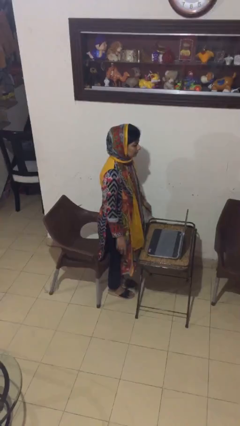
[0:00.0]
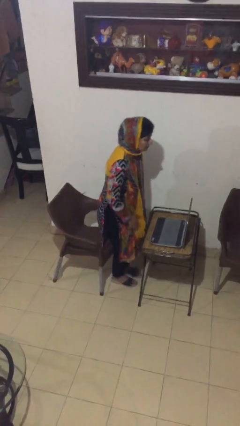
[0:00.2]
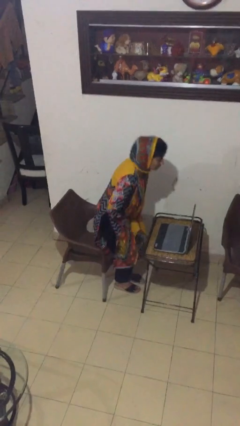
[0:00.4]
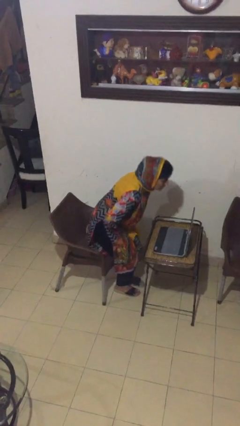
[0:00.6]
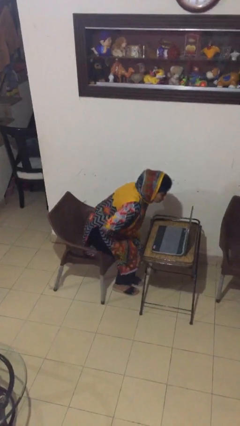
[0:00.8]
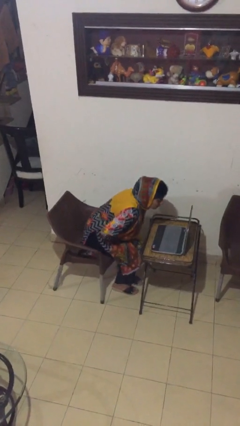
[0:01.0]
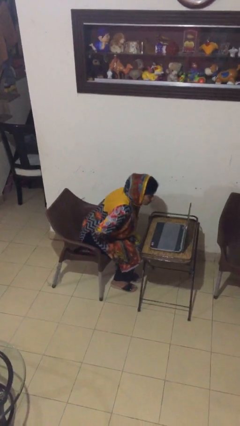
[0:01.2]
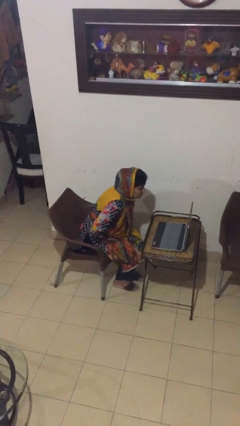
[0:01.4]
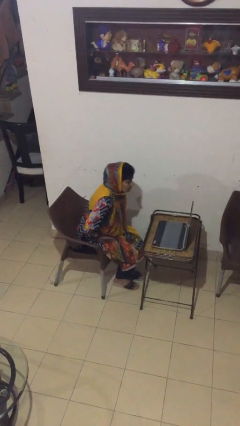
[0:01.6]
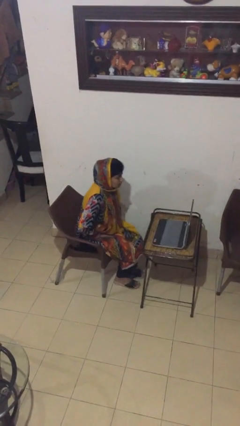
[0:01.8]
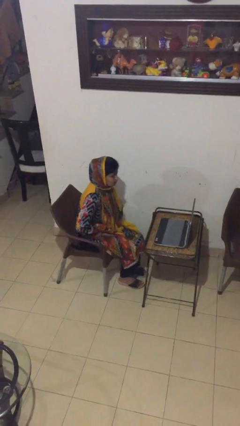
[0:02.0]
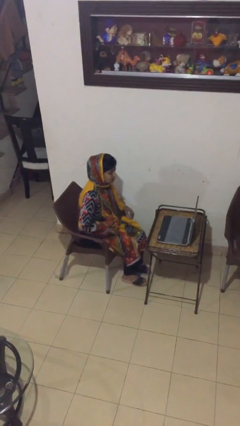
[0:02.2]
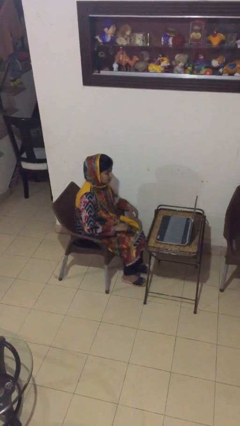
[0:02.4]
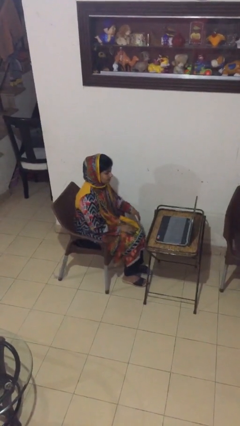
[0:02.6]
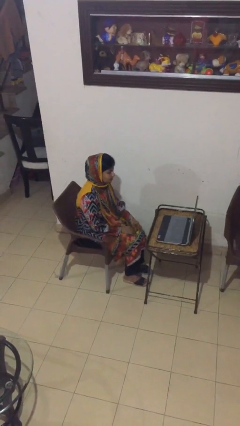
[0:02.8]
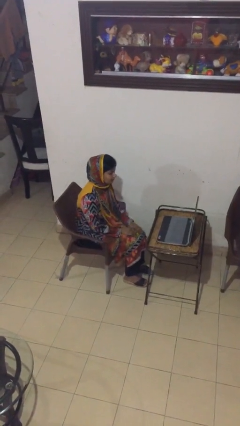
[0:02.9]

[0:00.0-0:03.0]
person sits down

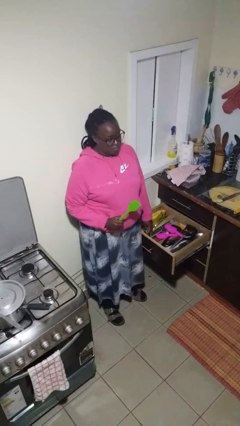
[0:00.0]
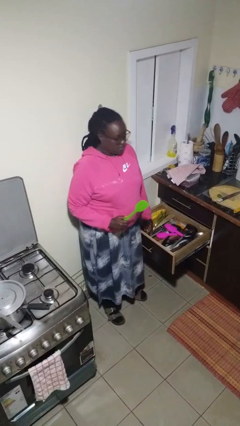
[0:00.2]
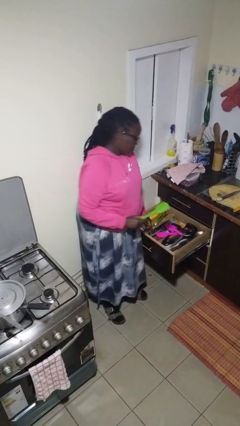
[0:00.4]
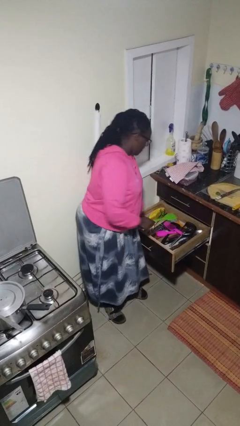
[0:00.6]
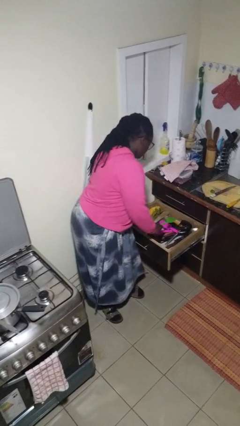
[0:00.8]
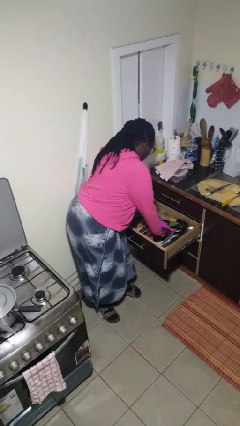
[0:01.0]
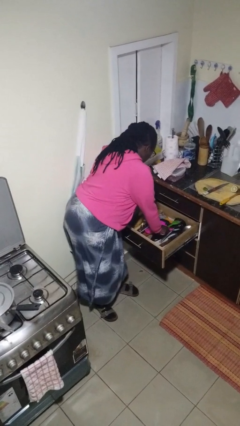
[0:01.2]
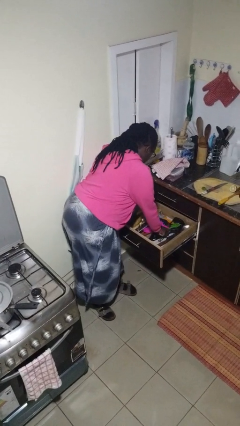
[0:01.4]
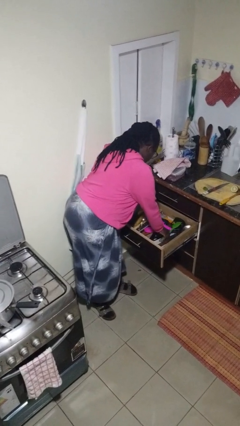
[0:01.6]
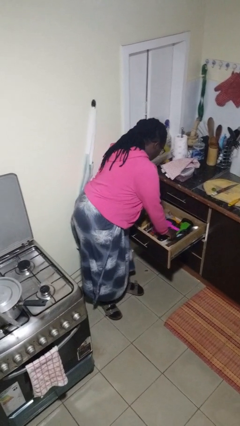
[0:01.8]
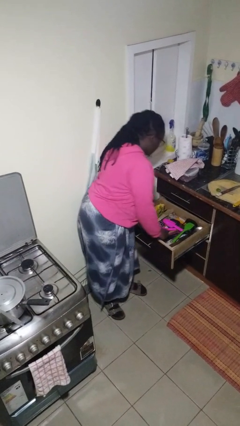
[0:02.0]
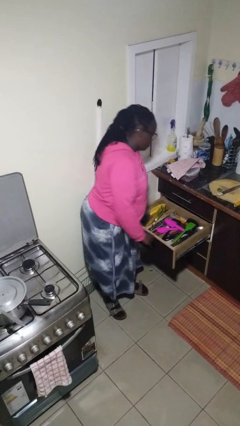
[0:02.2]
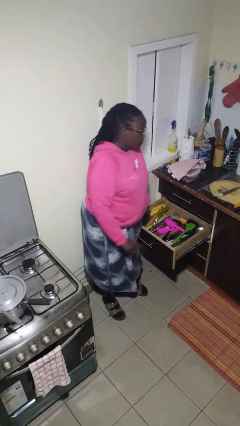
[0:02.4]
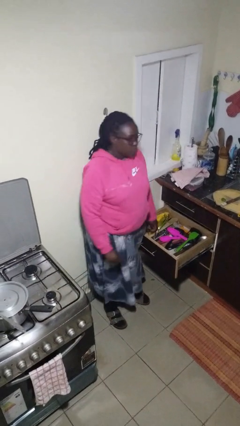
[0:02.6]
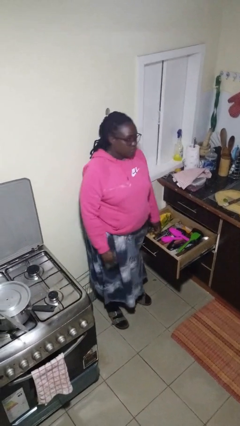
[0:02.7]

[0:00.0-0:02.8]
person puts object into kitchen drawer

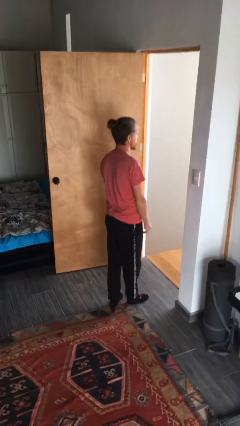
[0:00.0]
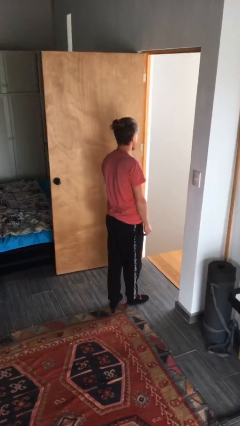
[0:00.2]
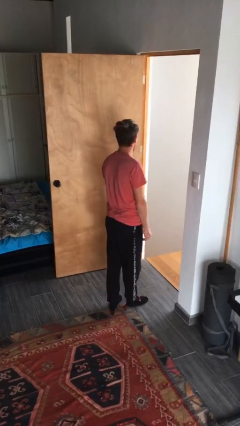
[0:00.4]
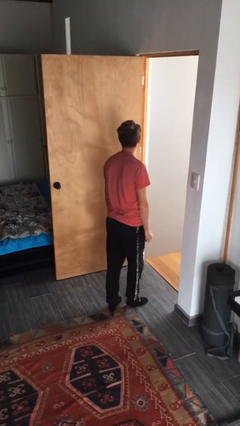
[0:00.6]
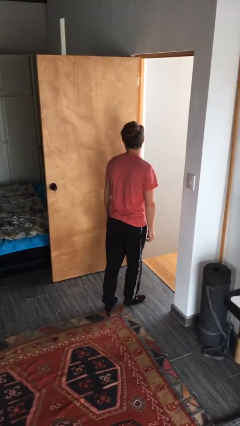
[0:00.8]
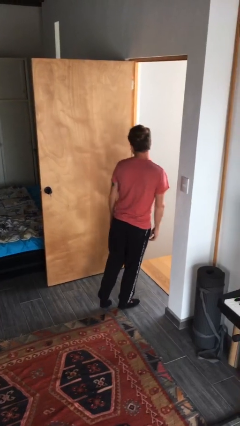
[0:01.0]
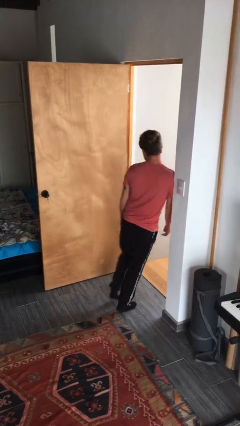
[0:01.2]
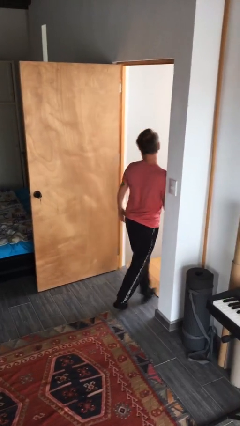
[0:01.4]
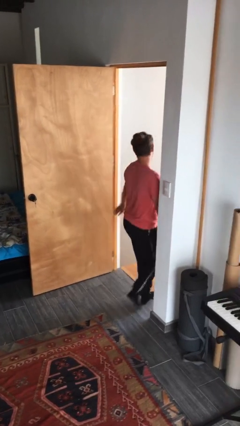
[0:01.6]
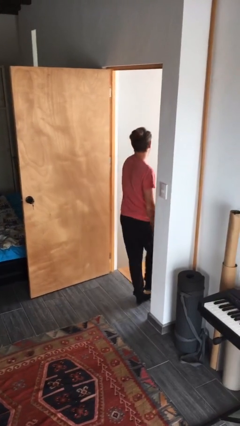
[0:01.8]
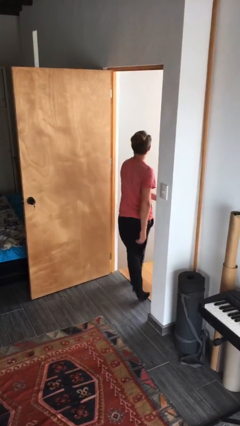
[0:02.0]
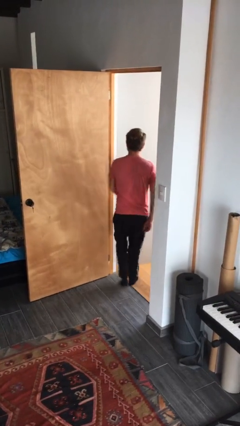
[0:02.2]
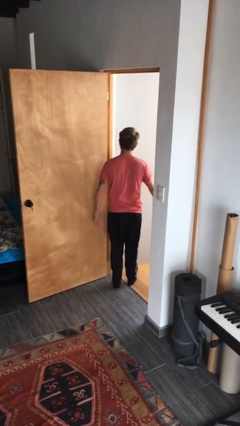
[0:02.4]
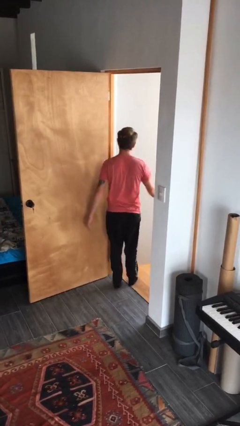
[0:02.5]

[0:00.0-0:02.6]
person bumps into wall

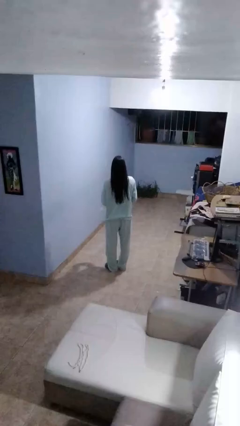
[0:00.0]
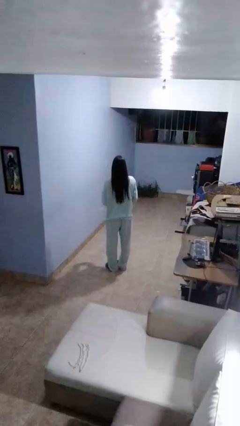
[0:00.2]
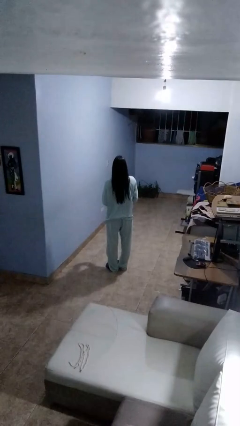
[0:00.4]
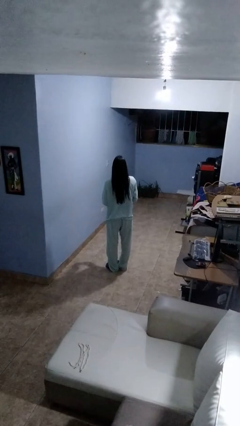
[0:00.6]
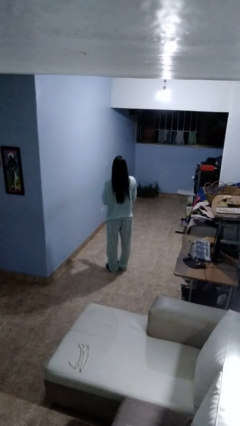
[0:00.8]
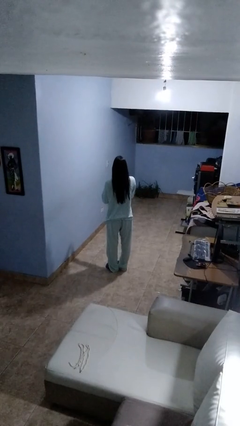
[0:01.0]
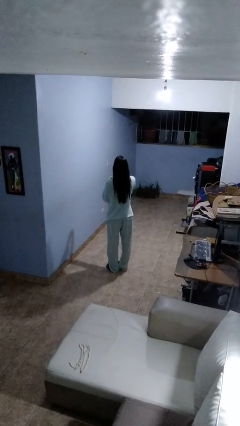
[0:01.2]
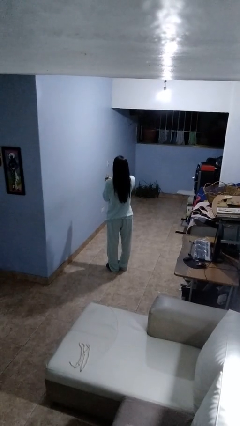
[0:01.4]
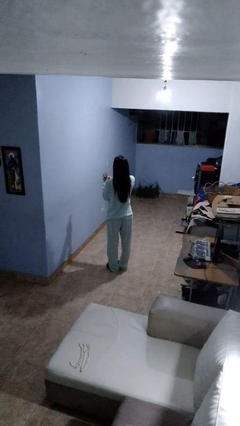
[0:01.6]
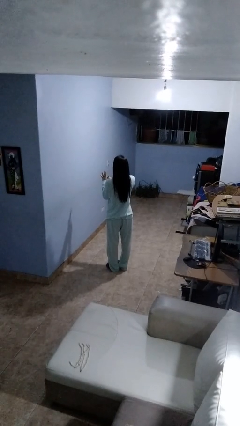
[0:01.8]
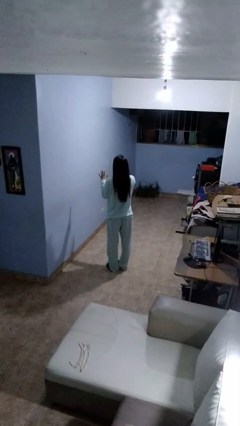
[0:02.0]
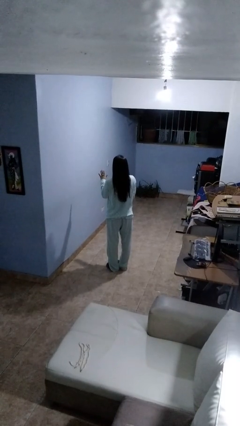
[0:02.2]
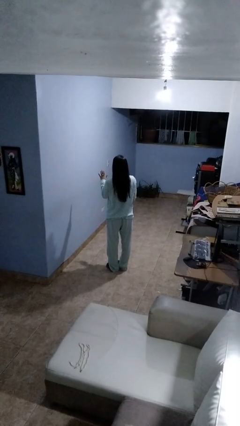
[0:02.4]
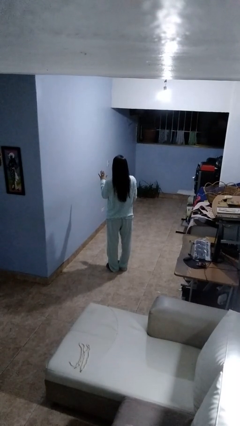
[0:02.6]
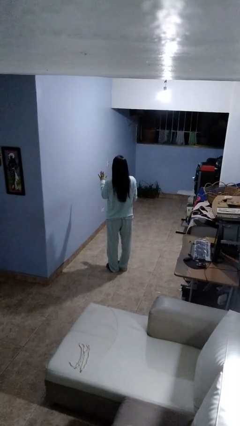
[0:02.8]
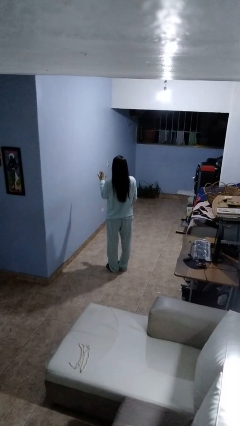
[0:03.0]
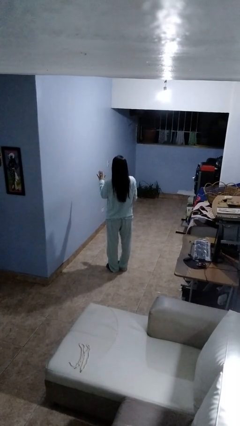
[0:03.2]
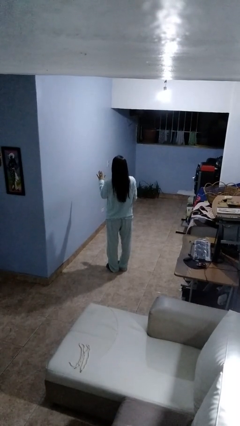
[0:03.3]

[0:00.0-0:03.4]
person puts on ring

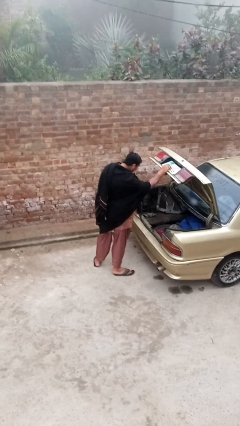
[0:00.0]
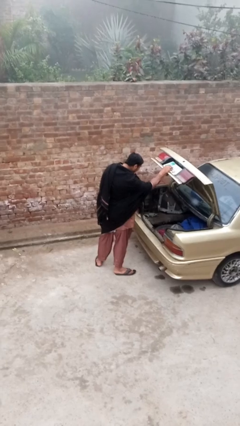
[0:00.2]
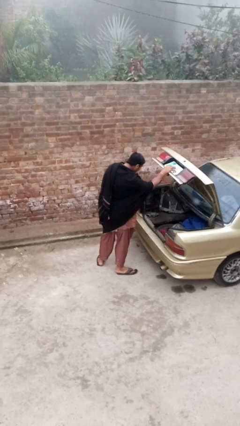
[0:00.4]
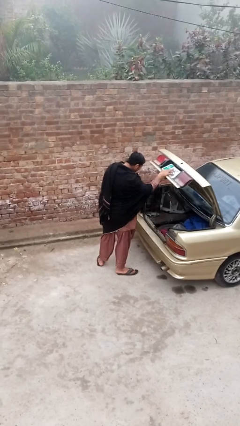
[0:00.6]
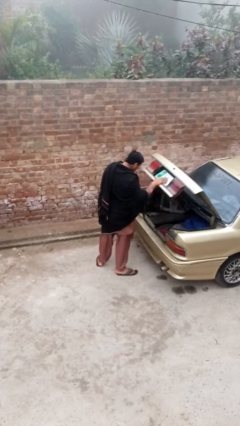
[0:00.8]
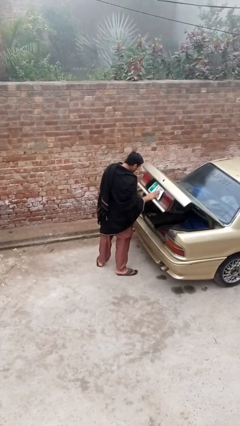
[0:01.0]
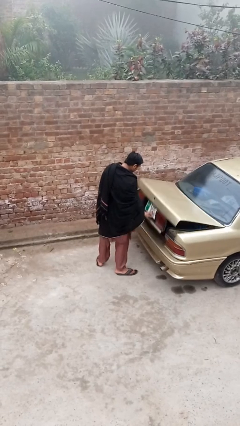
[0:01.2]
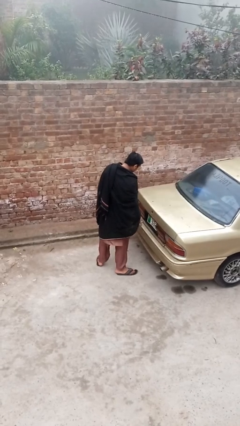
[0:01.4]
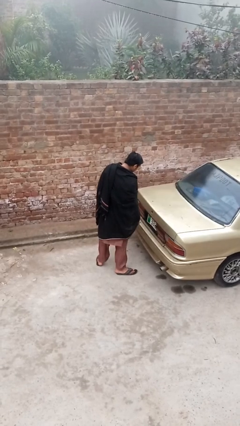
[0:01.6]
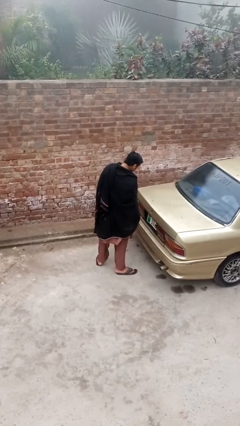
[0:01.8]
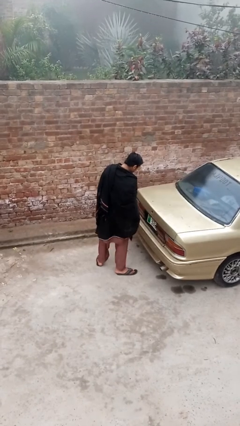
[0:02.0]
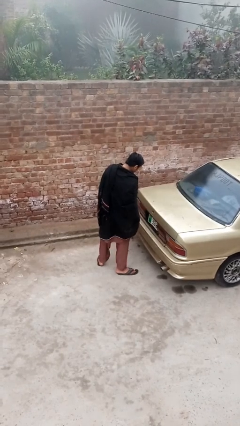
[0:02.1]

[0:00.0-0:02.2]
person closes car trunk

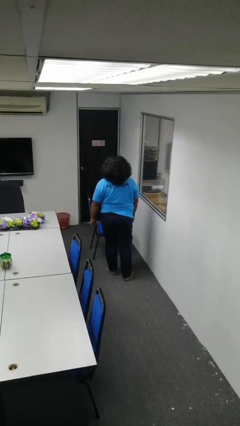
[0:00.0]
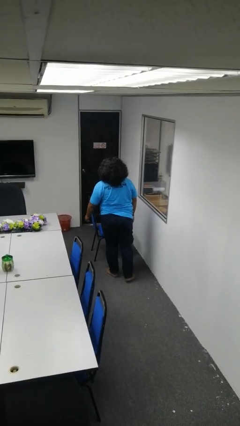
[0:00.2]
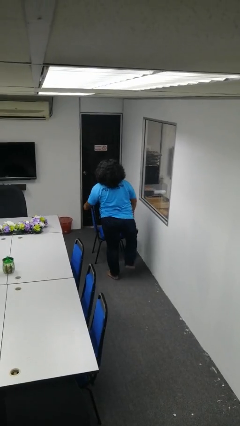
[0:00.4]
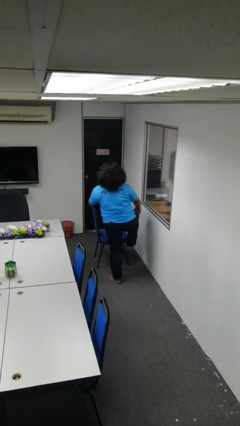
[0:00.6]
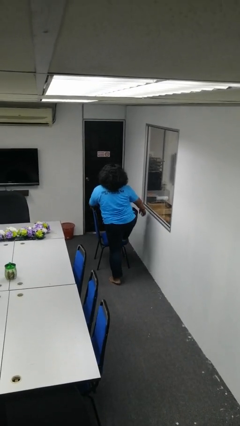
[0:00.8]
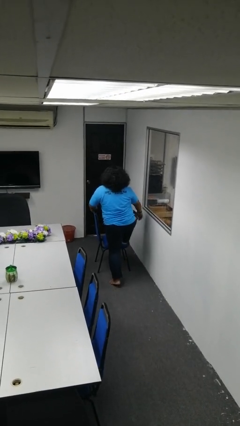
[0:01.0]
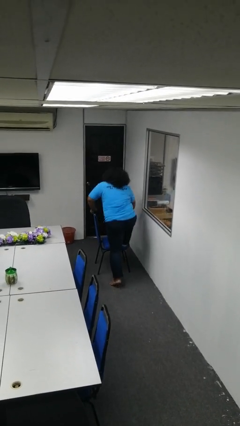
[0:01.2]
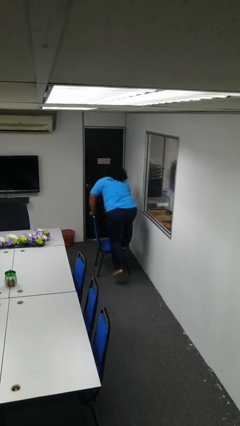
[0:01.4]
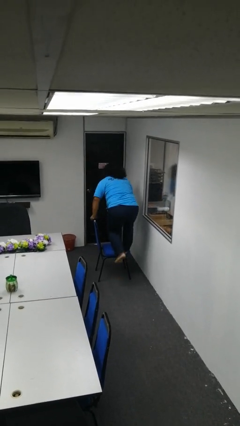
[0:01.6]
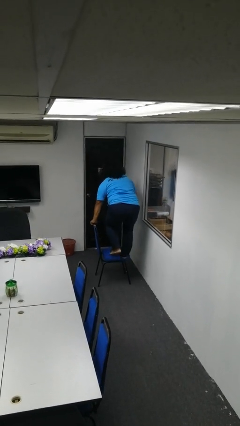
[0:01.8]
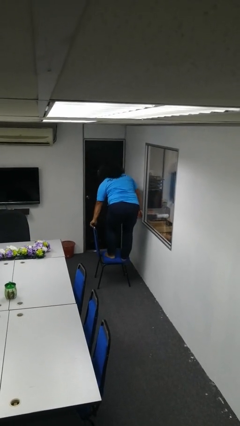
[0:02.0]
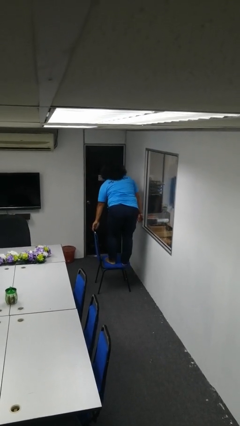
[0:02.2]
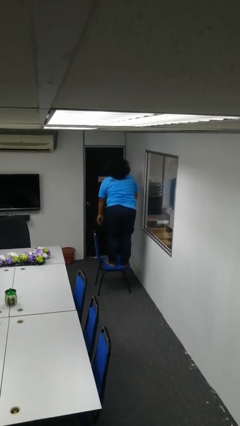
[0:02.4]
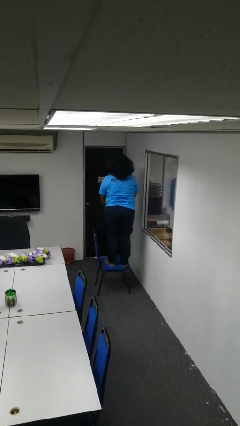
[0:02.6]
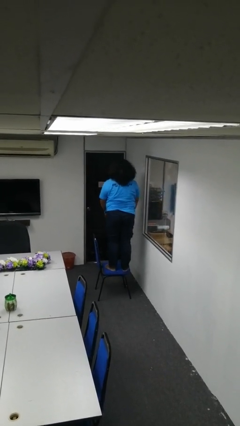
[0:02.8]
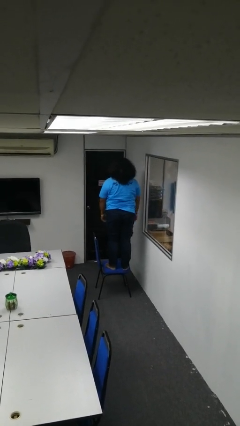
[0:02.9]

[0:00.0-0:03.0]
person climbs on chair

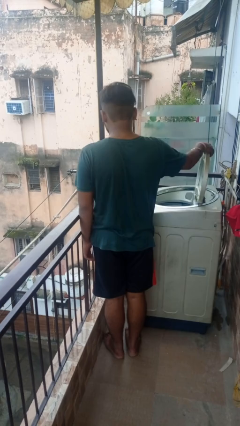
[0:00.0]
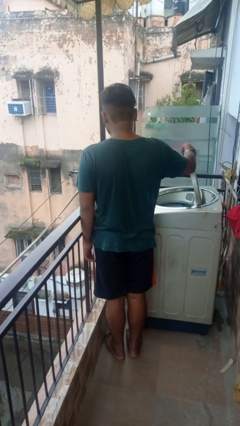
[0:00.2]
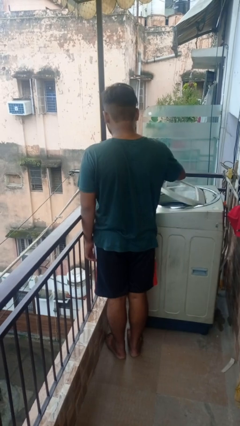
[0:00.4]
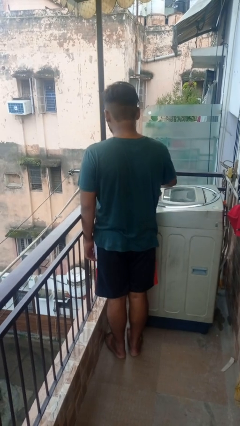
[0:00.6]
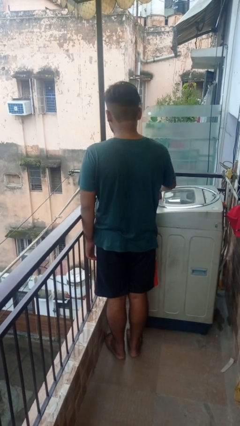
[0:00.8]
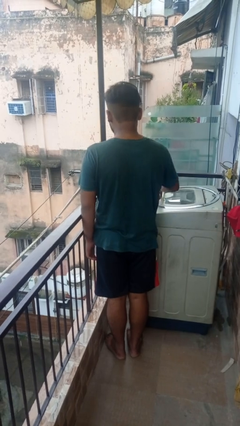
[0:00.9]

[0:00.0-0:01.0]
person closes clothes washer
